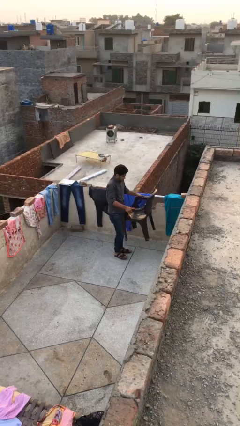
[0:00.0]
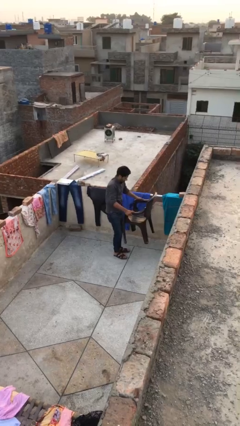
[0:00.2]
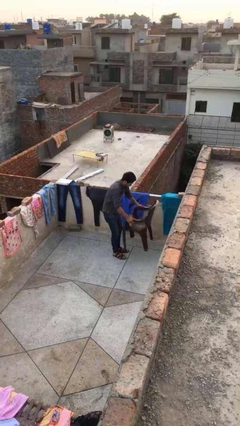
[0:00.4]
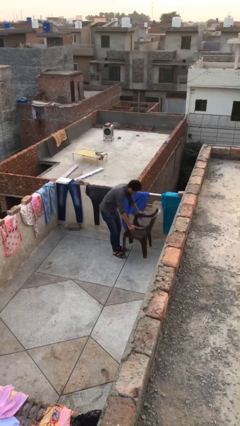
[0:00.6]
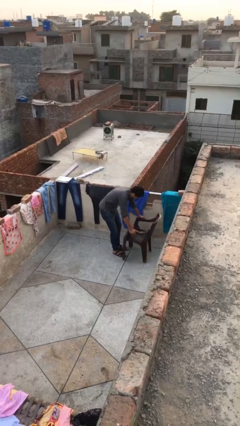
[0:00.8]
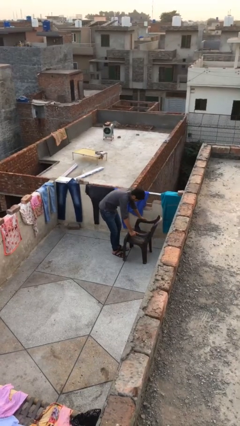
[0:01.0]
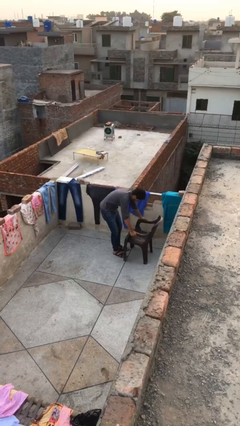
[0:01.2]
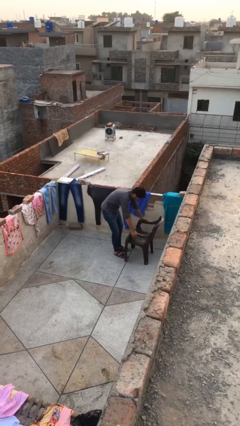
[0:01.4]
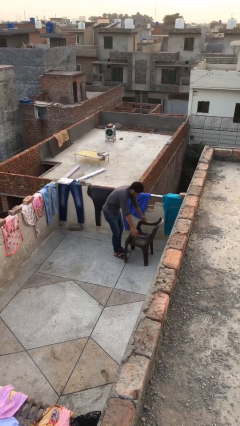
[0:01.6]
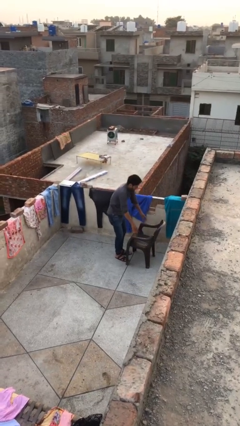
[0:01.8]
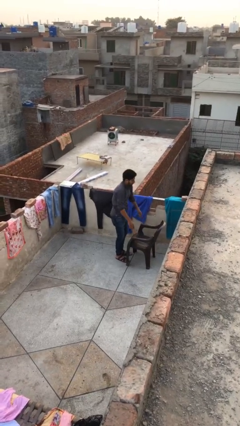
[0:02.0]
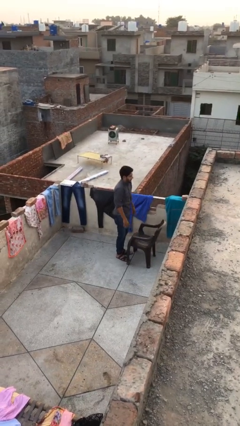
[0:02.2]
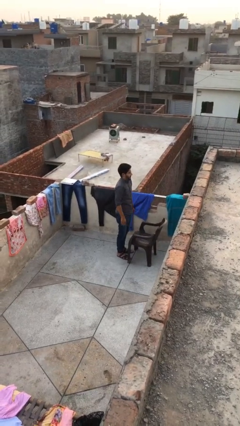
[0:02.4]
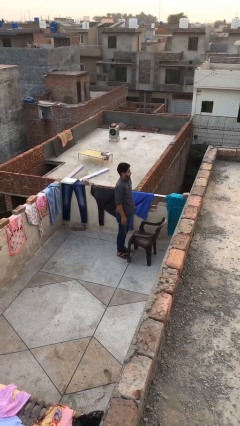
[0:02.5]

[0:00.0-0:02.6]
person puts down object on floor

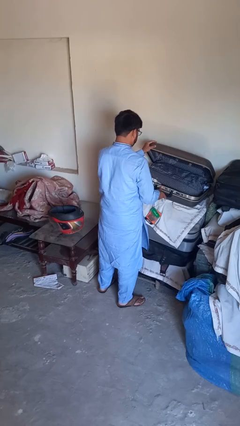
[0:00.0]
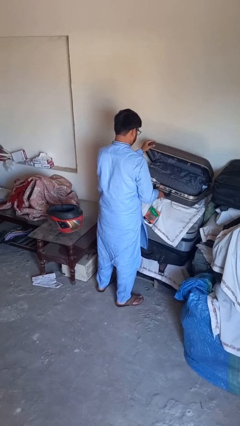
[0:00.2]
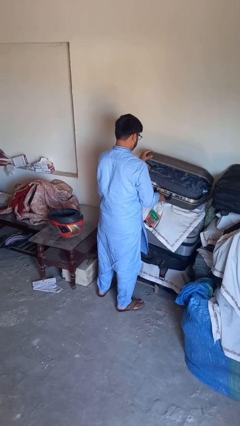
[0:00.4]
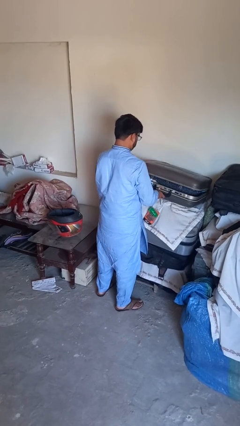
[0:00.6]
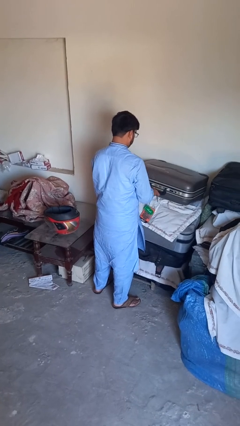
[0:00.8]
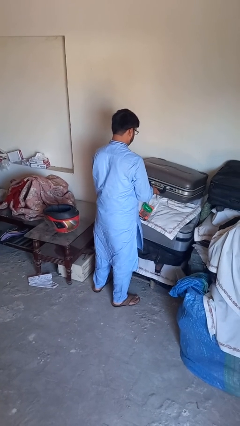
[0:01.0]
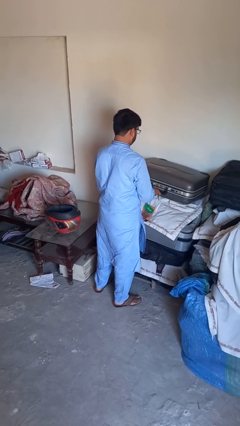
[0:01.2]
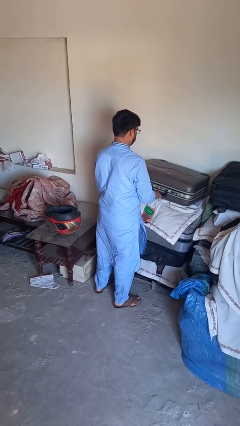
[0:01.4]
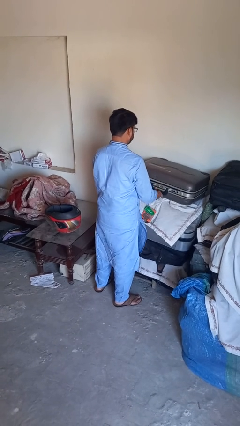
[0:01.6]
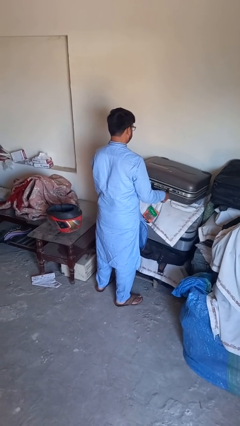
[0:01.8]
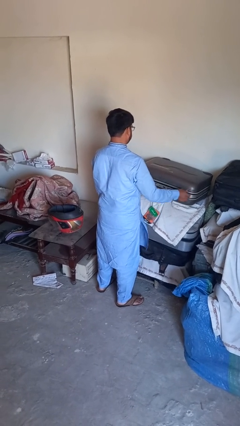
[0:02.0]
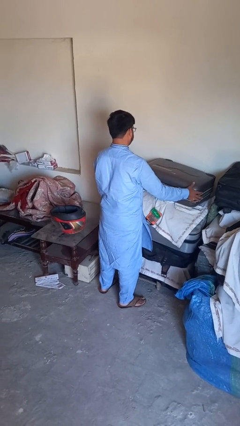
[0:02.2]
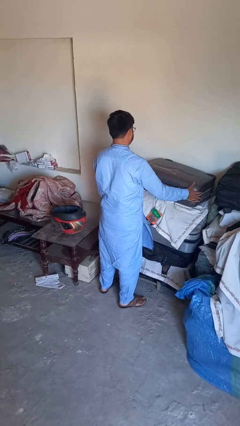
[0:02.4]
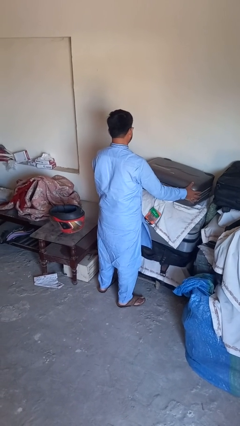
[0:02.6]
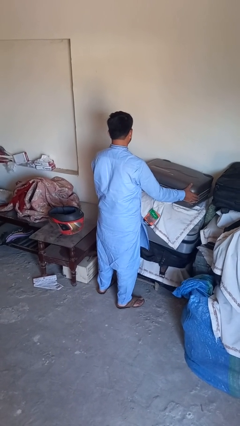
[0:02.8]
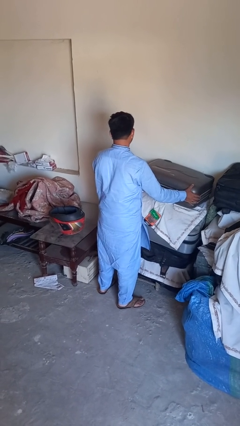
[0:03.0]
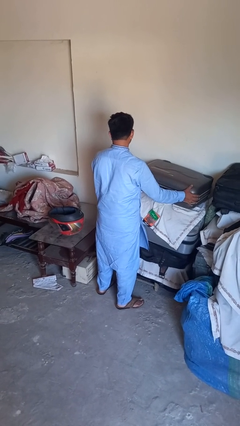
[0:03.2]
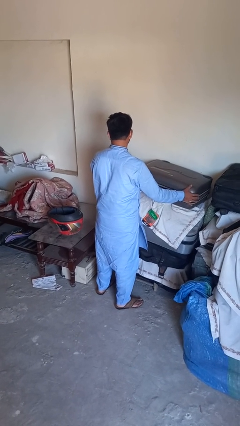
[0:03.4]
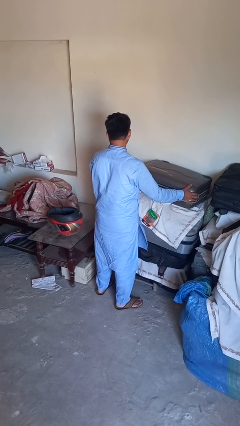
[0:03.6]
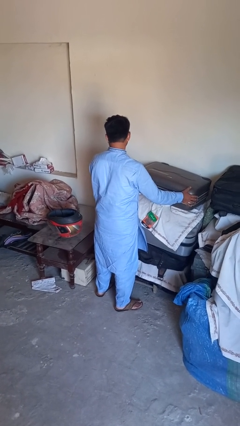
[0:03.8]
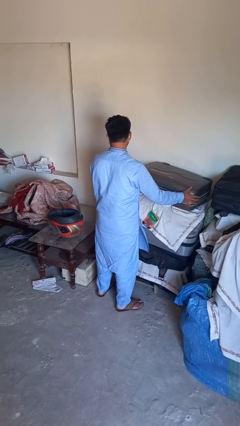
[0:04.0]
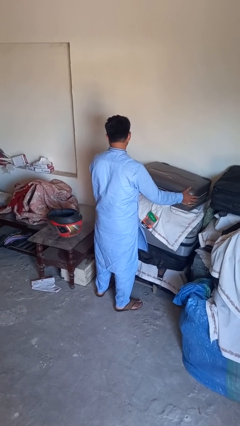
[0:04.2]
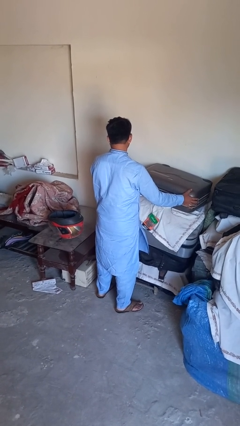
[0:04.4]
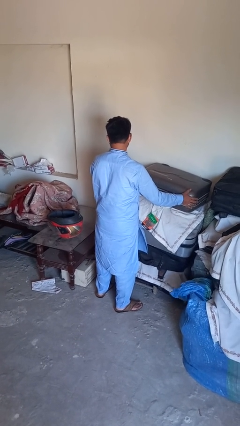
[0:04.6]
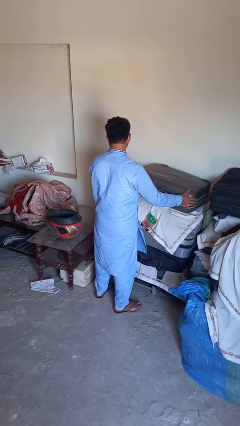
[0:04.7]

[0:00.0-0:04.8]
person closes suitcase

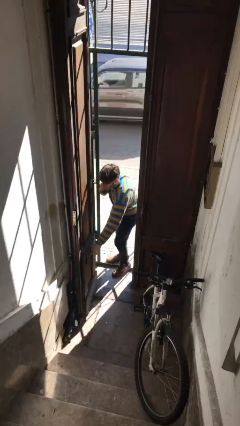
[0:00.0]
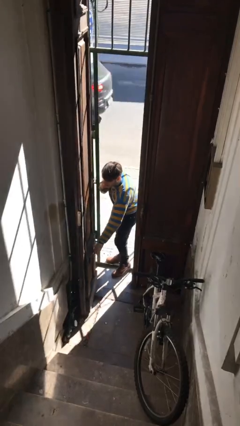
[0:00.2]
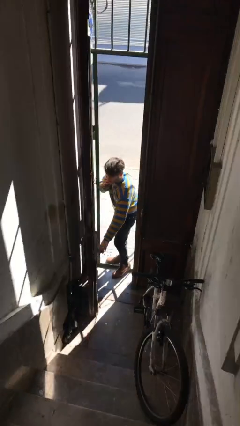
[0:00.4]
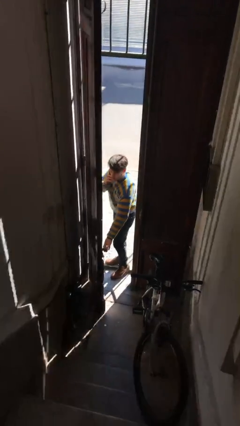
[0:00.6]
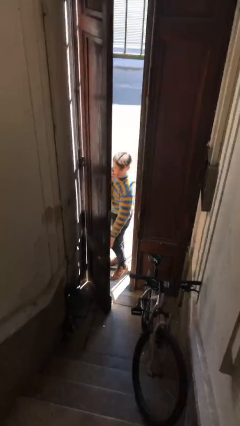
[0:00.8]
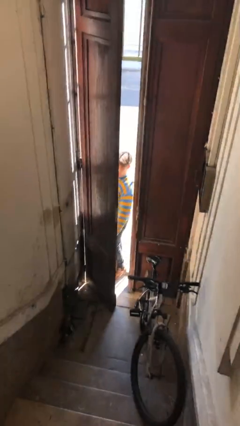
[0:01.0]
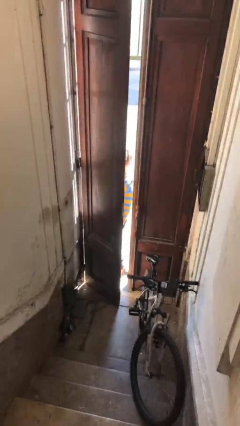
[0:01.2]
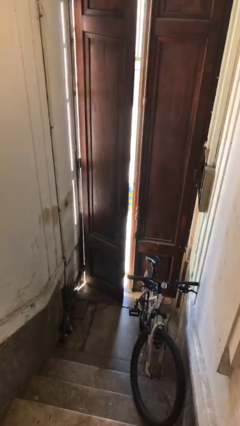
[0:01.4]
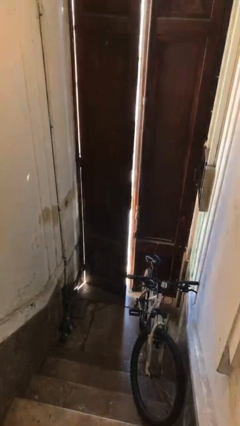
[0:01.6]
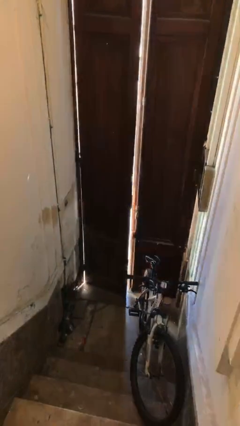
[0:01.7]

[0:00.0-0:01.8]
person closes facility door

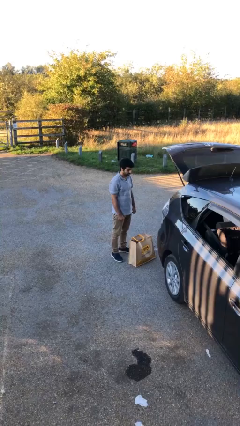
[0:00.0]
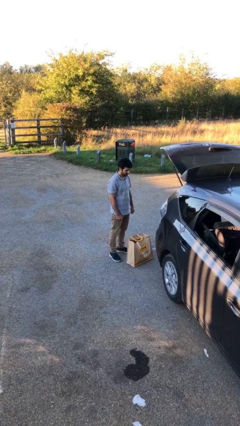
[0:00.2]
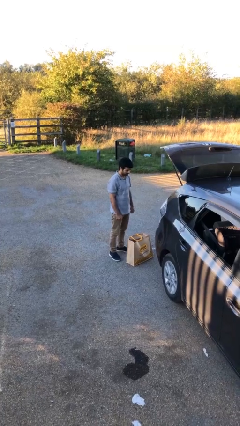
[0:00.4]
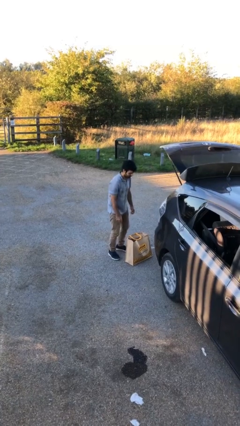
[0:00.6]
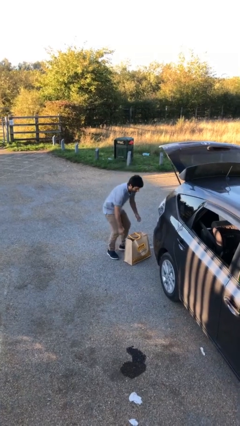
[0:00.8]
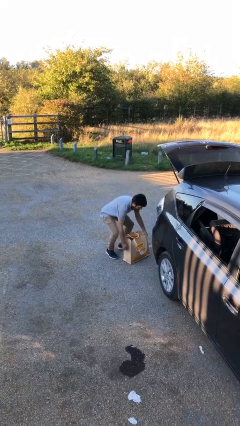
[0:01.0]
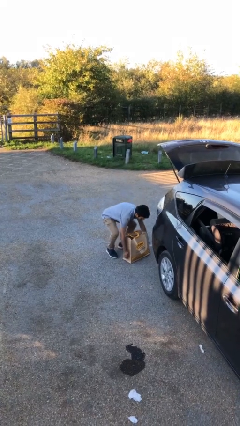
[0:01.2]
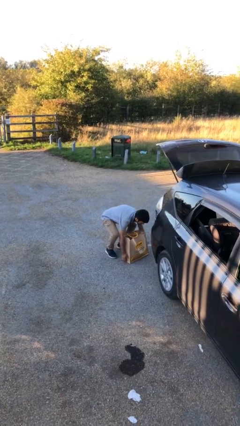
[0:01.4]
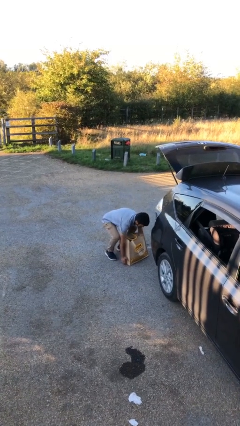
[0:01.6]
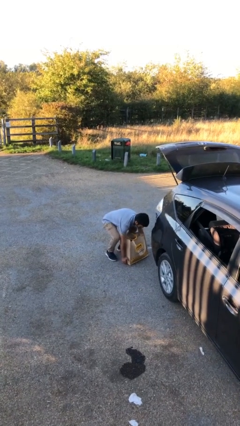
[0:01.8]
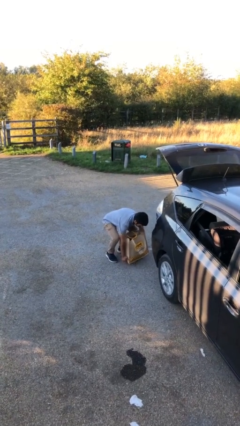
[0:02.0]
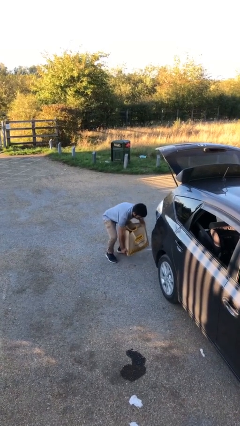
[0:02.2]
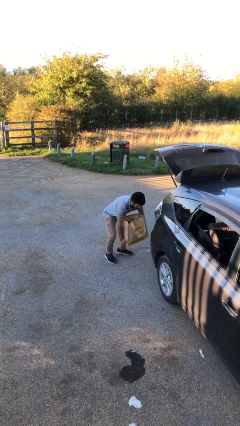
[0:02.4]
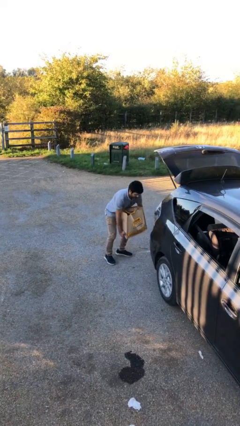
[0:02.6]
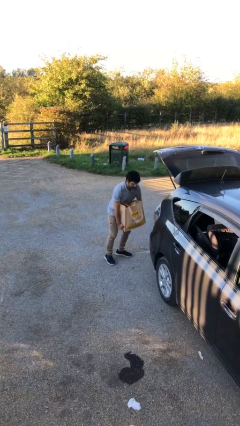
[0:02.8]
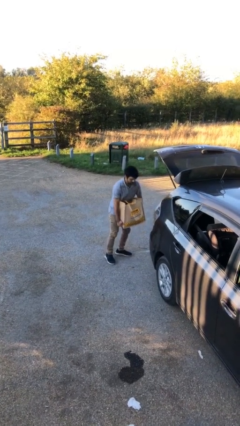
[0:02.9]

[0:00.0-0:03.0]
person picks up object from floor

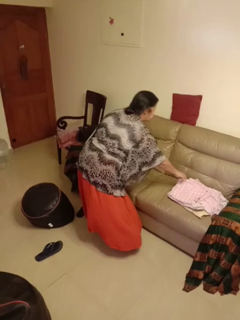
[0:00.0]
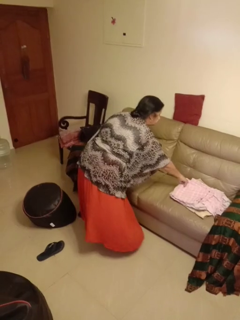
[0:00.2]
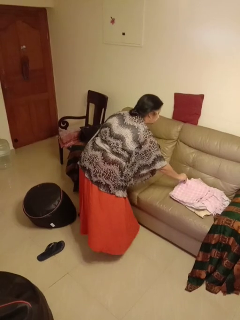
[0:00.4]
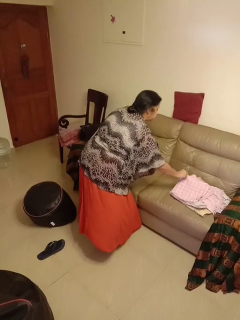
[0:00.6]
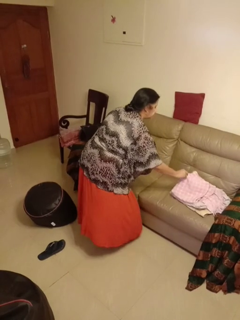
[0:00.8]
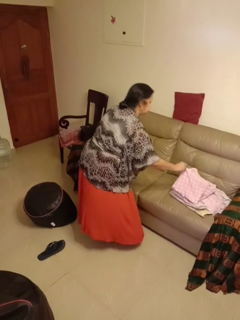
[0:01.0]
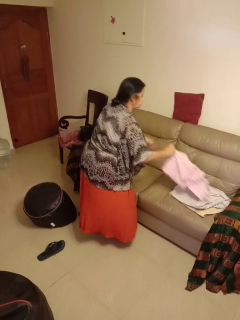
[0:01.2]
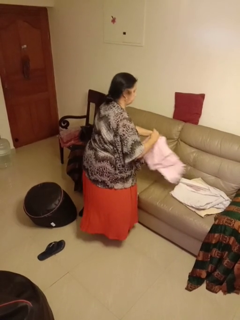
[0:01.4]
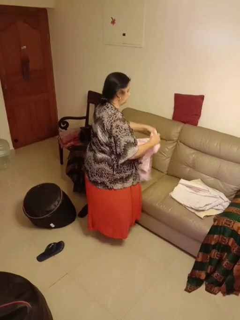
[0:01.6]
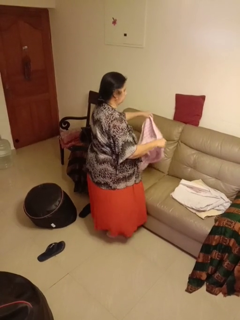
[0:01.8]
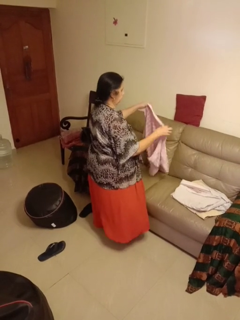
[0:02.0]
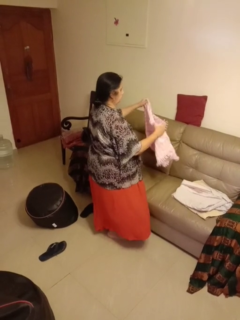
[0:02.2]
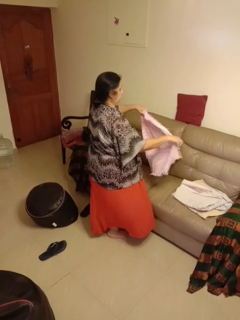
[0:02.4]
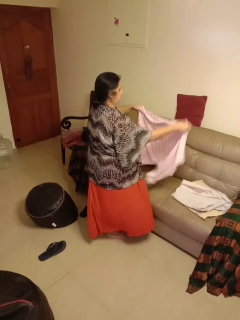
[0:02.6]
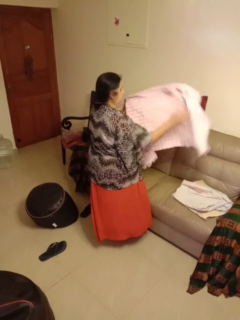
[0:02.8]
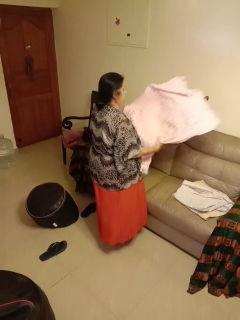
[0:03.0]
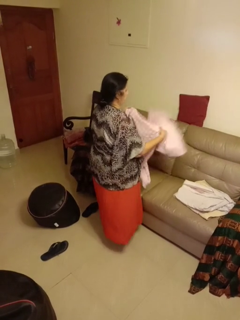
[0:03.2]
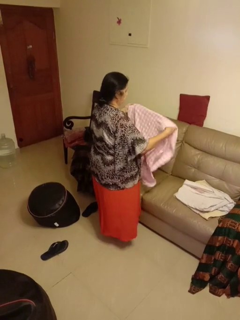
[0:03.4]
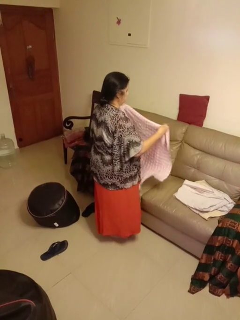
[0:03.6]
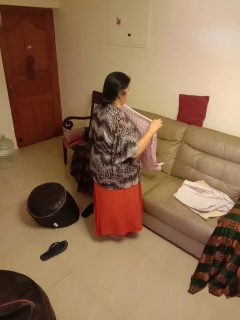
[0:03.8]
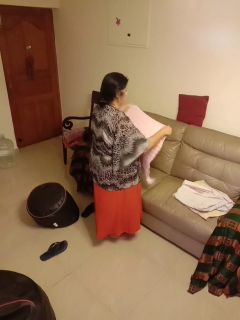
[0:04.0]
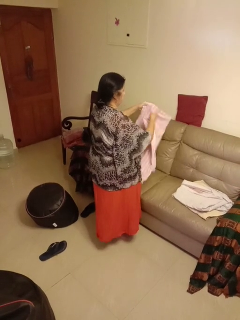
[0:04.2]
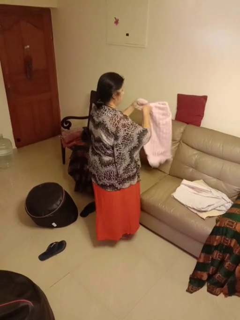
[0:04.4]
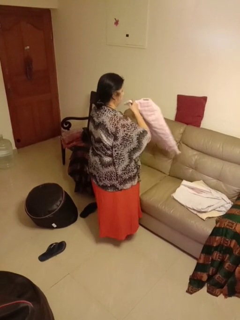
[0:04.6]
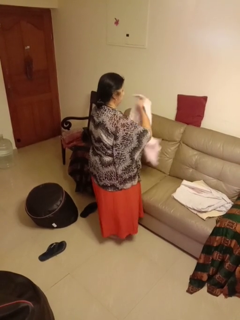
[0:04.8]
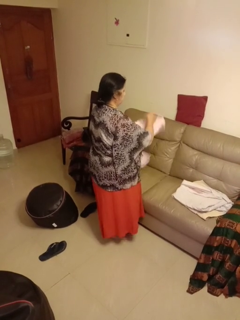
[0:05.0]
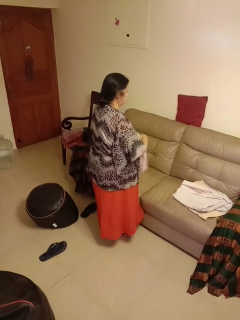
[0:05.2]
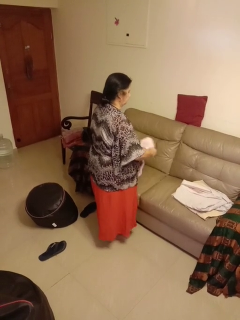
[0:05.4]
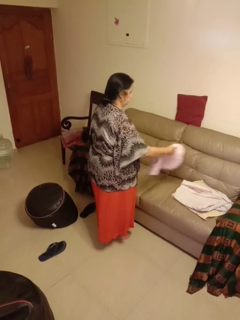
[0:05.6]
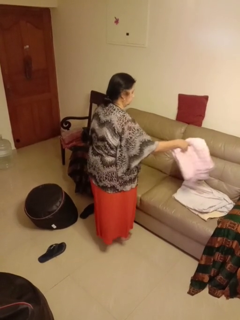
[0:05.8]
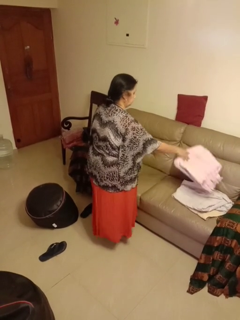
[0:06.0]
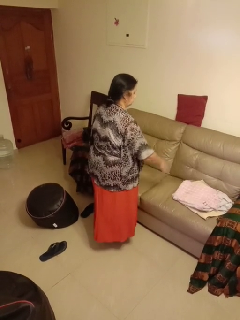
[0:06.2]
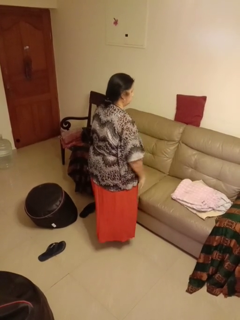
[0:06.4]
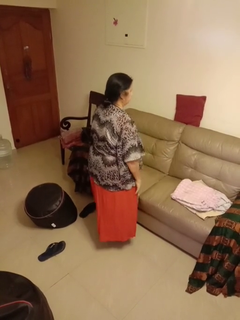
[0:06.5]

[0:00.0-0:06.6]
person folds towel

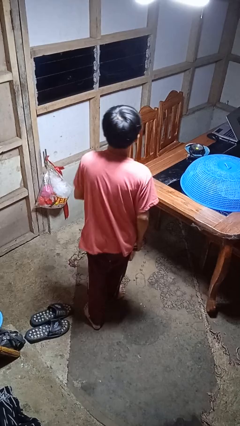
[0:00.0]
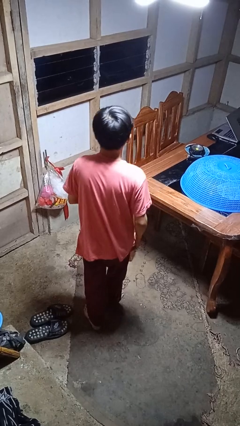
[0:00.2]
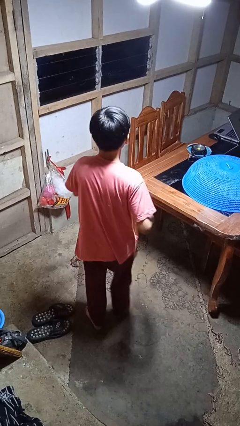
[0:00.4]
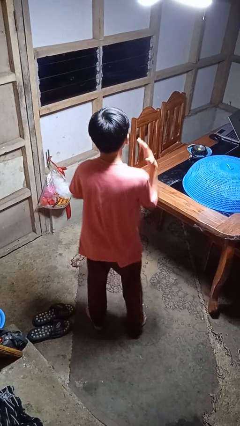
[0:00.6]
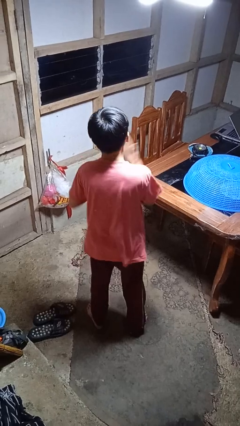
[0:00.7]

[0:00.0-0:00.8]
person karate chop
